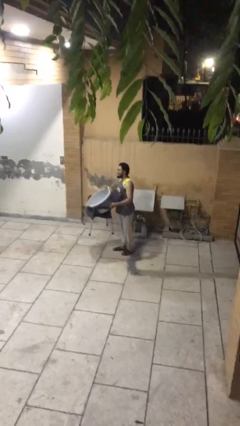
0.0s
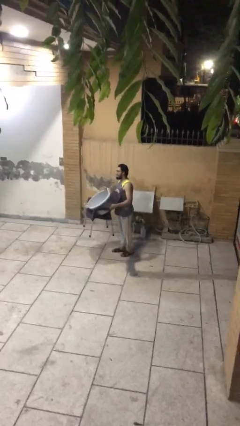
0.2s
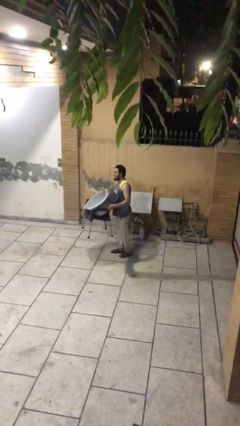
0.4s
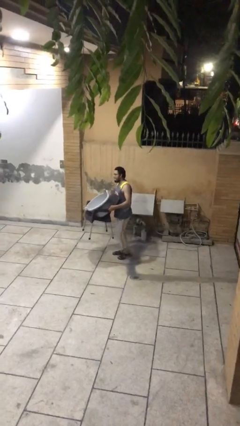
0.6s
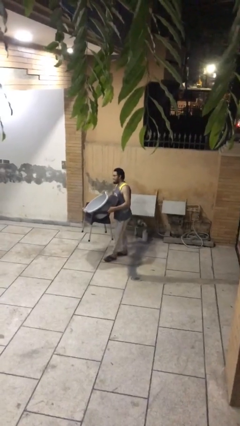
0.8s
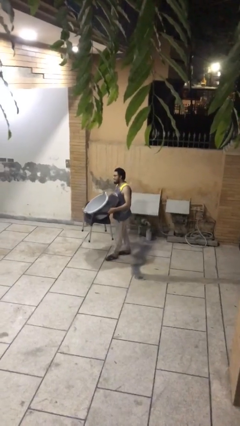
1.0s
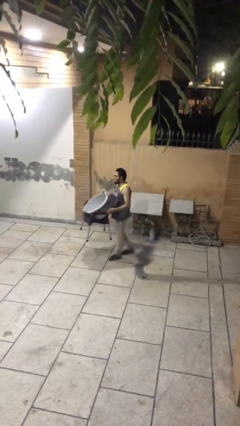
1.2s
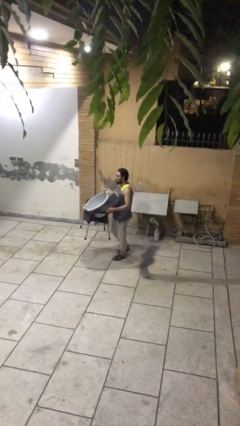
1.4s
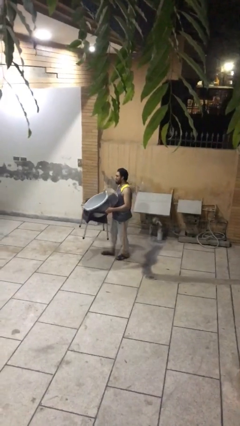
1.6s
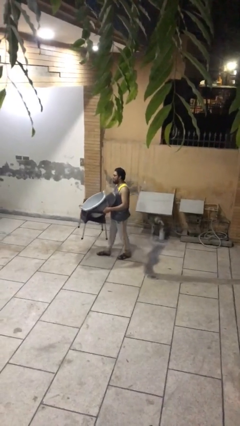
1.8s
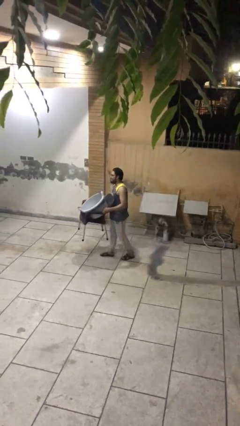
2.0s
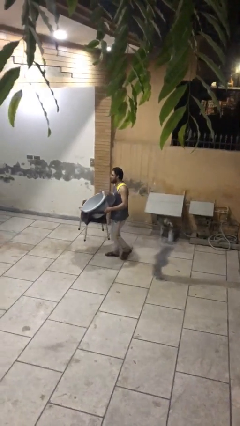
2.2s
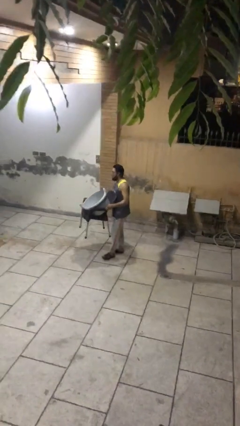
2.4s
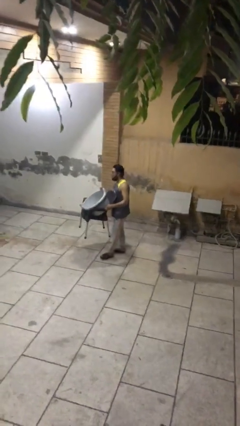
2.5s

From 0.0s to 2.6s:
person carries heavy object

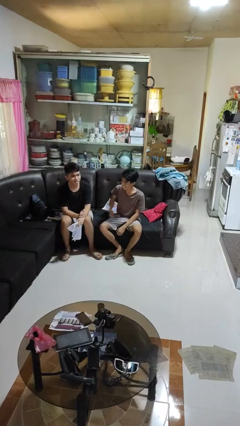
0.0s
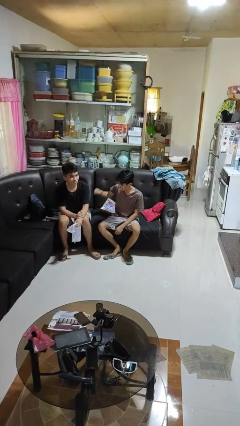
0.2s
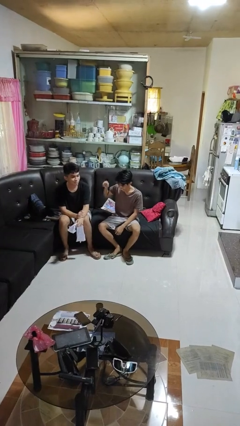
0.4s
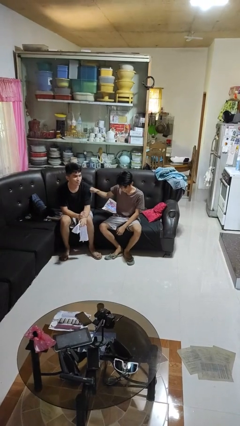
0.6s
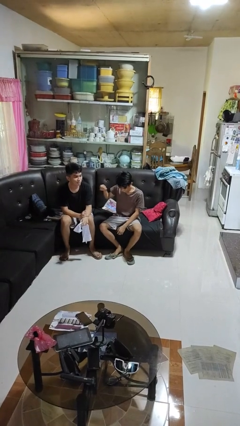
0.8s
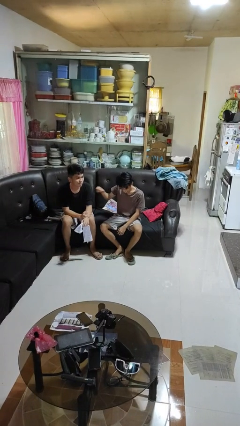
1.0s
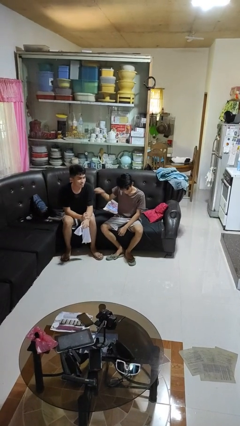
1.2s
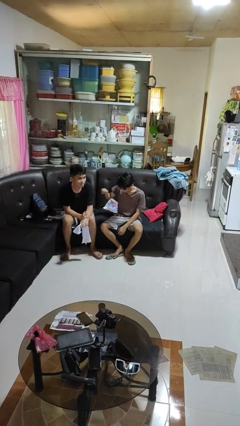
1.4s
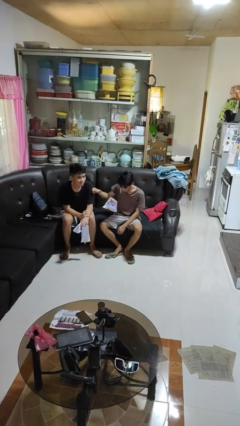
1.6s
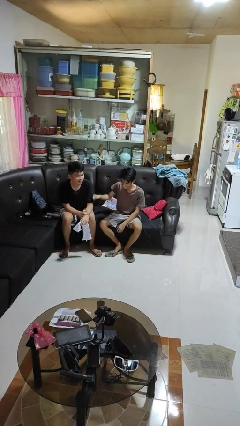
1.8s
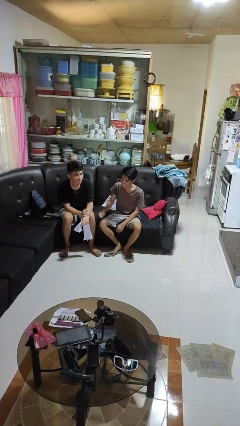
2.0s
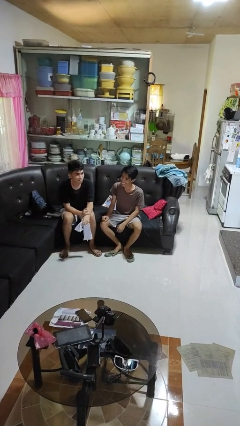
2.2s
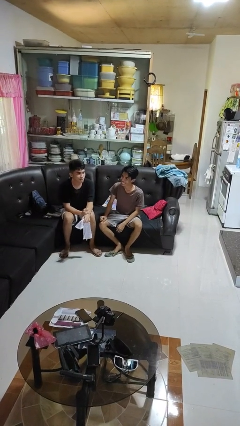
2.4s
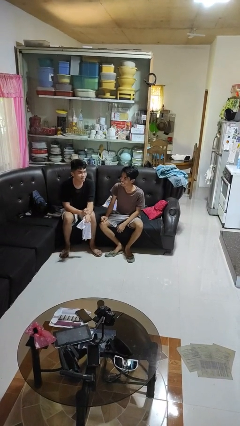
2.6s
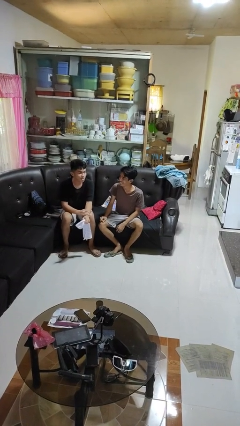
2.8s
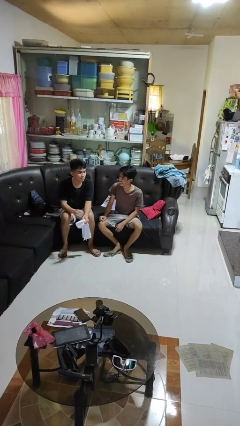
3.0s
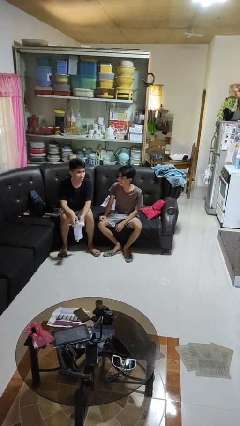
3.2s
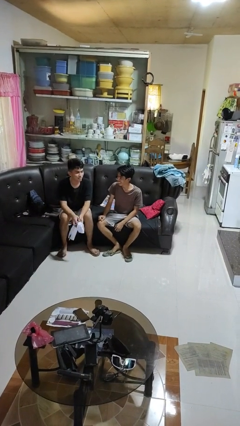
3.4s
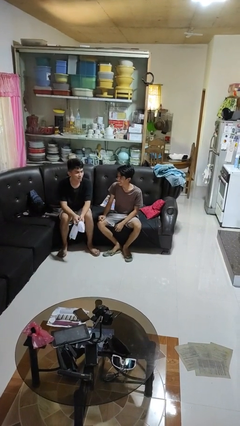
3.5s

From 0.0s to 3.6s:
person pounds shoulders of person

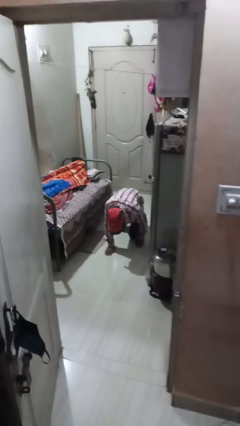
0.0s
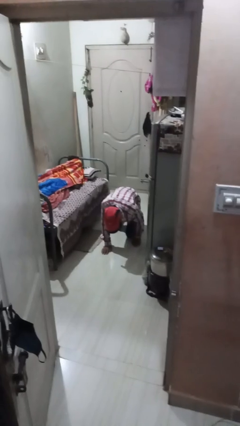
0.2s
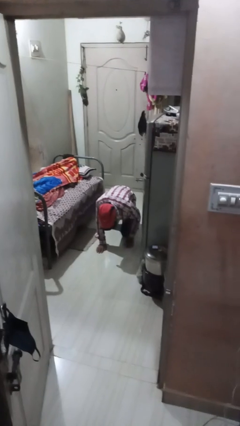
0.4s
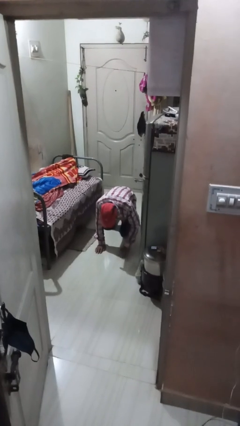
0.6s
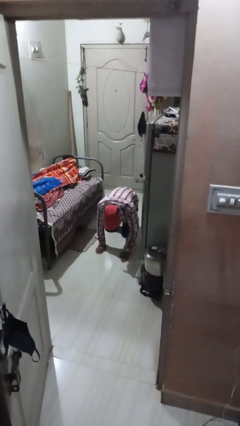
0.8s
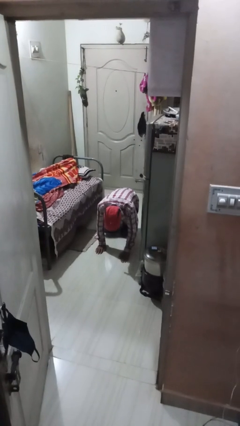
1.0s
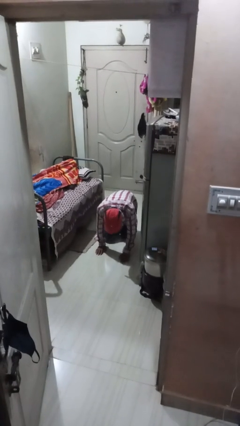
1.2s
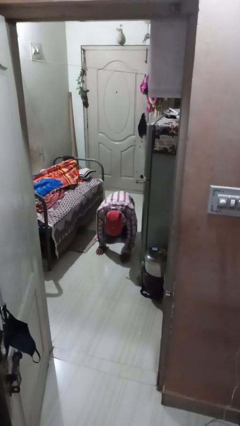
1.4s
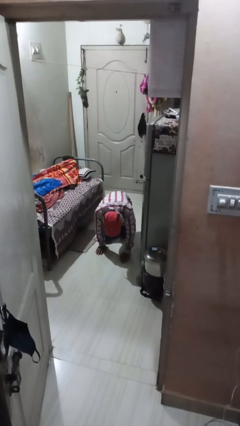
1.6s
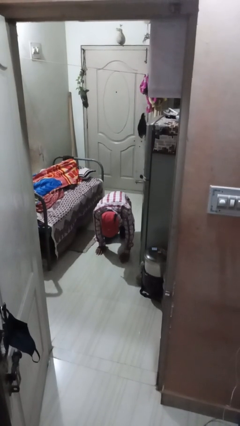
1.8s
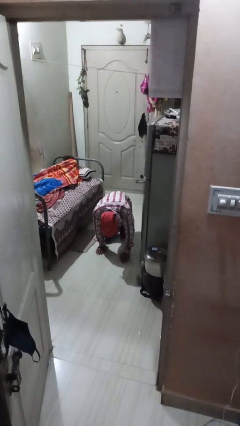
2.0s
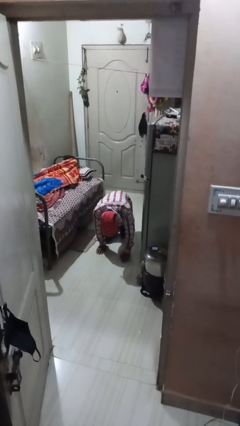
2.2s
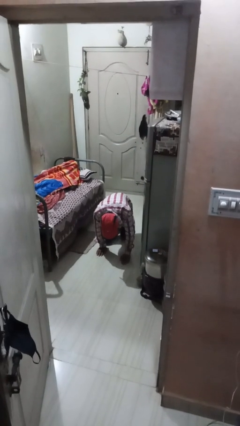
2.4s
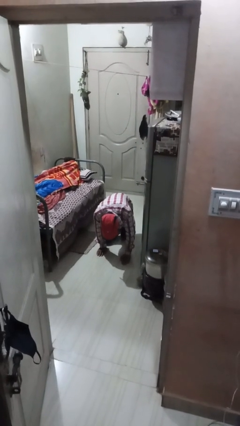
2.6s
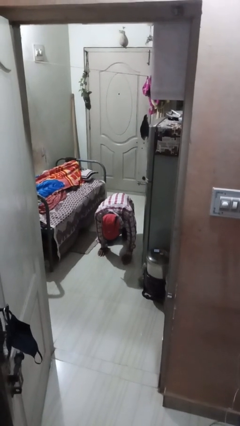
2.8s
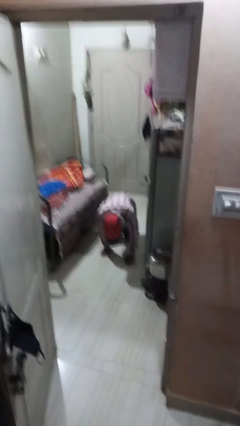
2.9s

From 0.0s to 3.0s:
person crawls

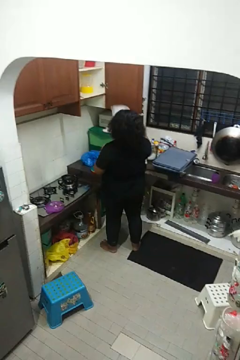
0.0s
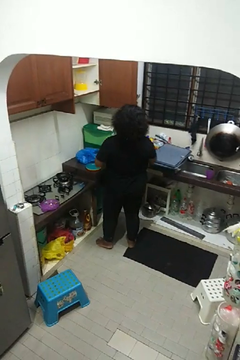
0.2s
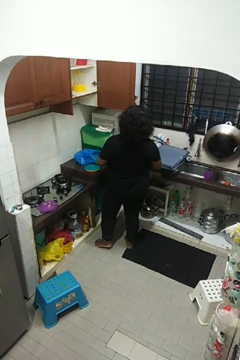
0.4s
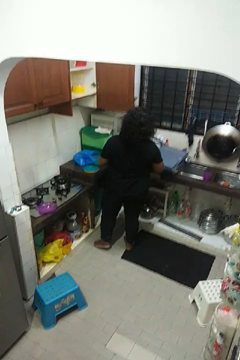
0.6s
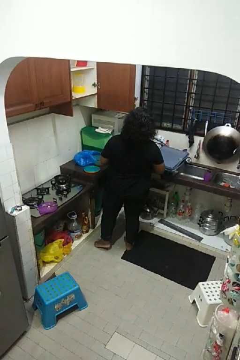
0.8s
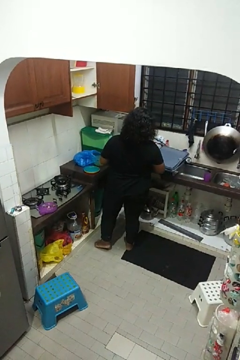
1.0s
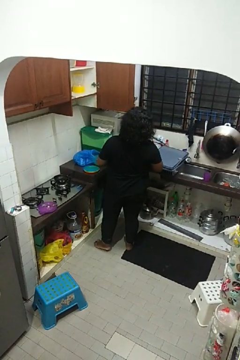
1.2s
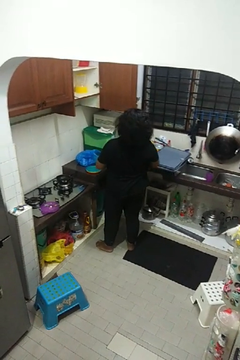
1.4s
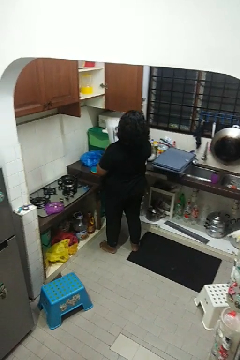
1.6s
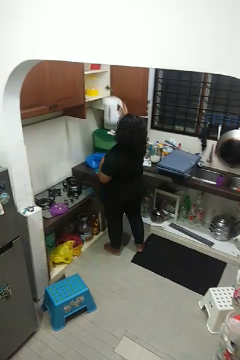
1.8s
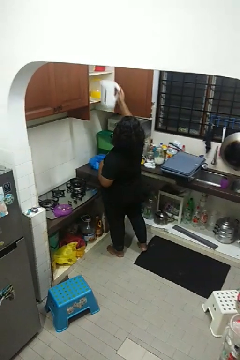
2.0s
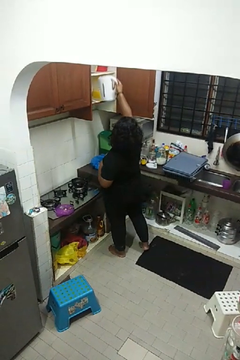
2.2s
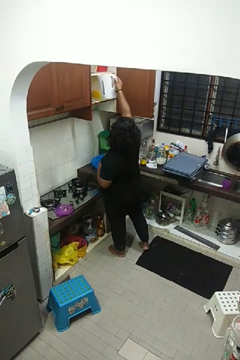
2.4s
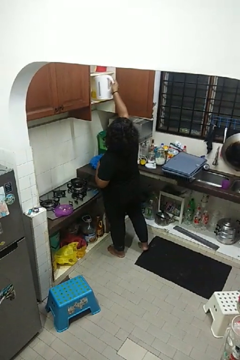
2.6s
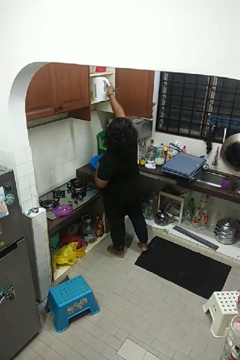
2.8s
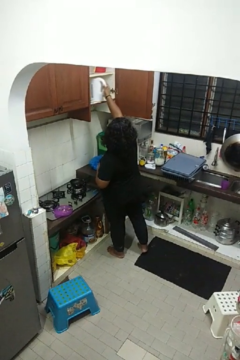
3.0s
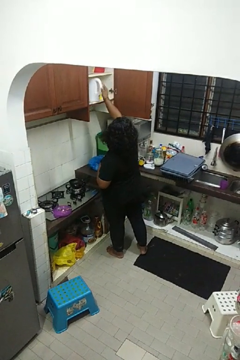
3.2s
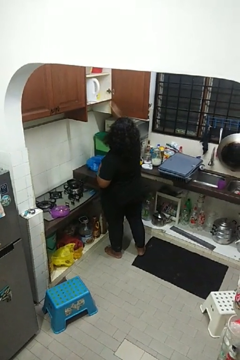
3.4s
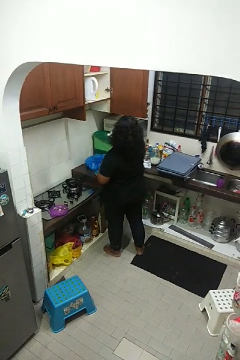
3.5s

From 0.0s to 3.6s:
person puts object in cabinet

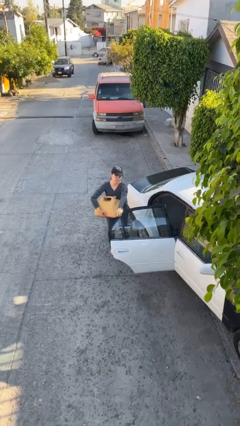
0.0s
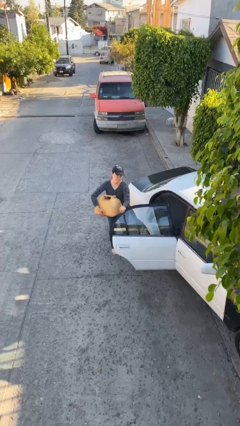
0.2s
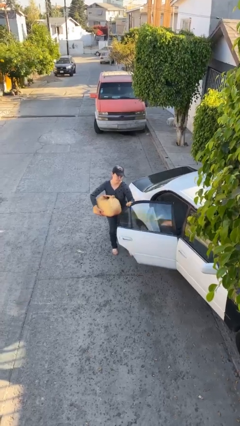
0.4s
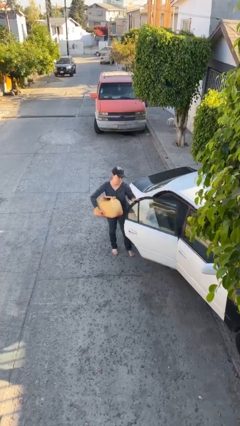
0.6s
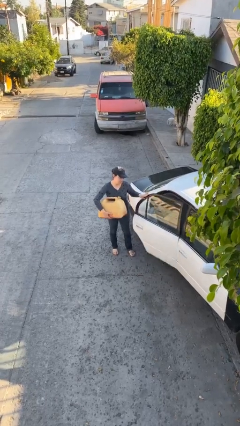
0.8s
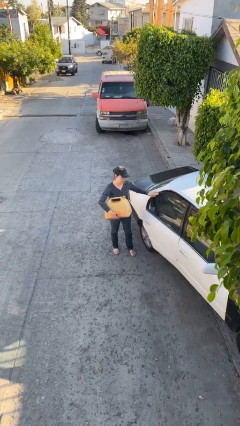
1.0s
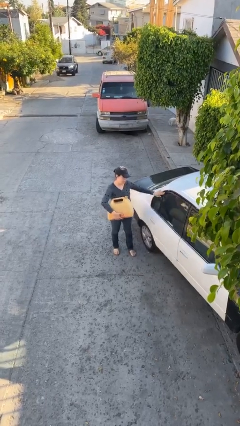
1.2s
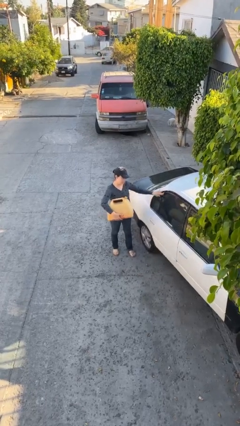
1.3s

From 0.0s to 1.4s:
person closes car door

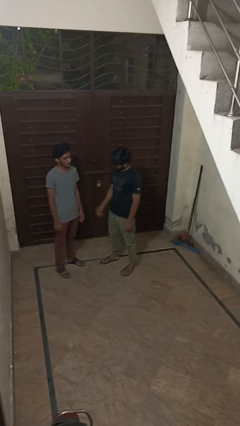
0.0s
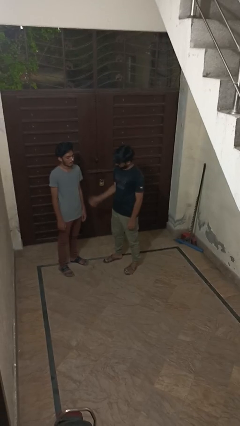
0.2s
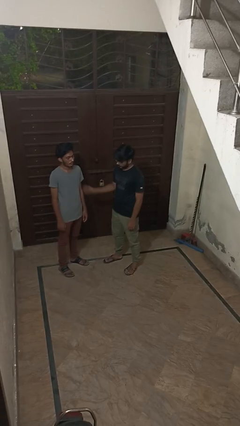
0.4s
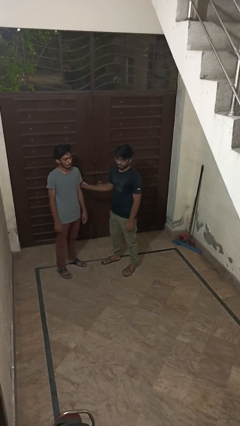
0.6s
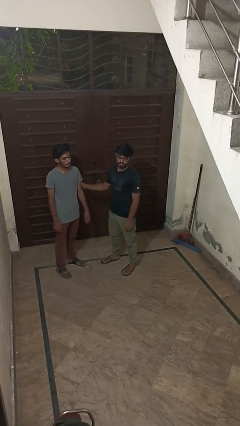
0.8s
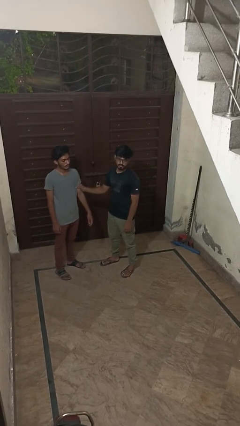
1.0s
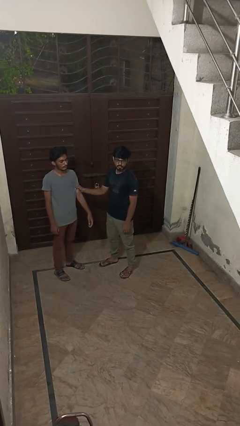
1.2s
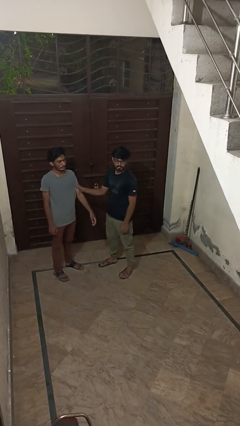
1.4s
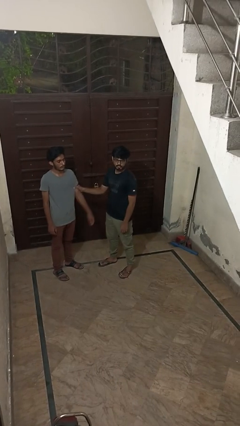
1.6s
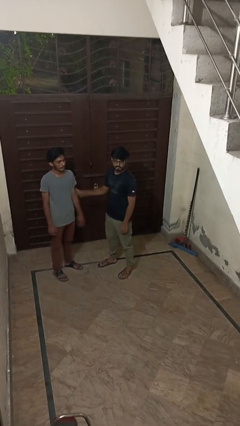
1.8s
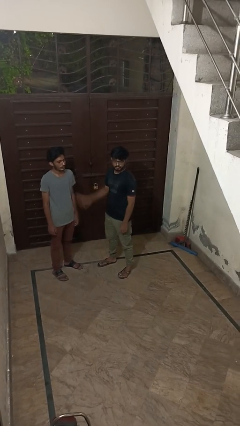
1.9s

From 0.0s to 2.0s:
person grabs person by bicep

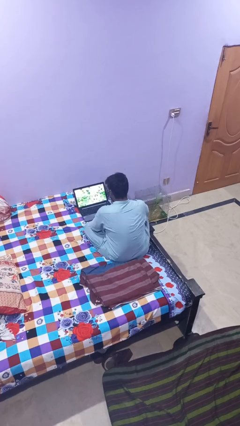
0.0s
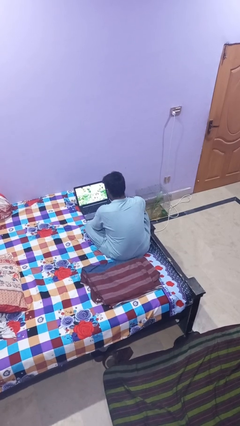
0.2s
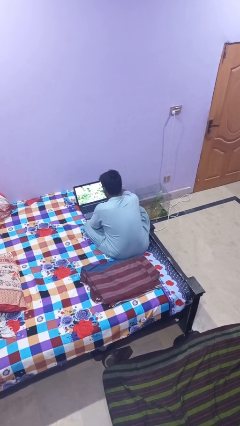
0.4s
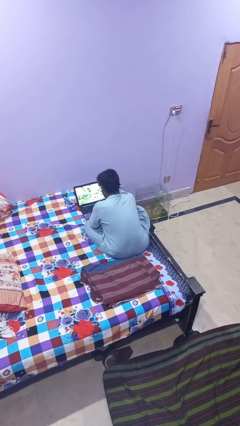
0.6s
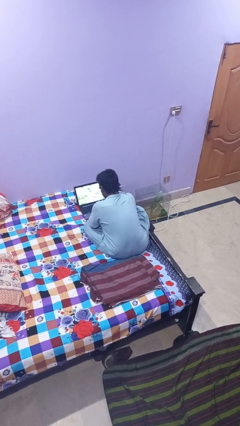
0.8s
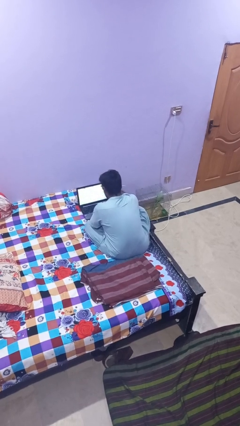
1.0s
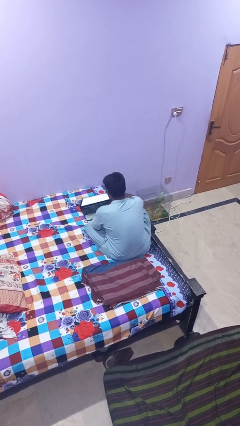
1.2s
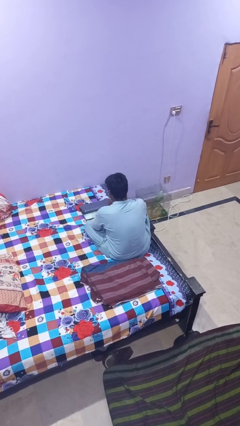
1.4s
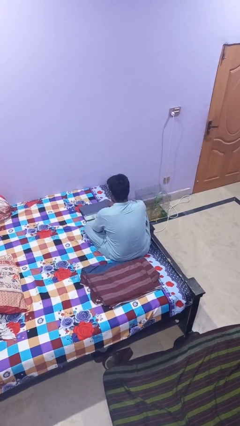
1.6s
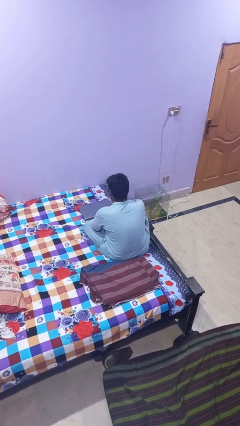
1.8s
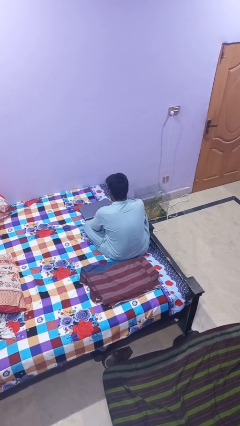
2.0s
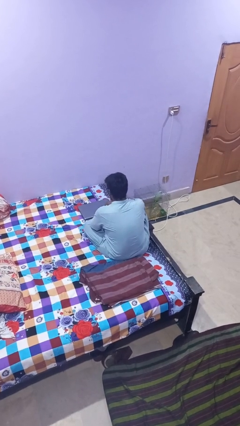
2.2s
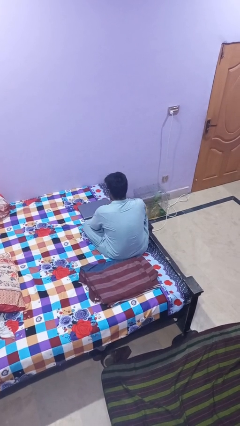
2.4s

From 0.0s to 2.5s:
person closes laptop
